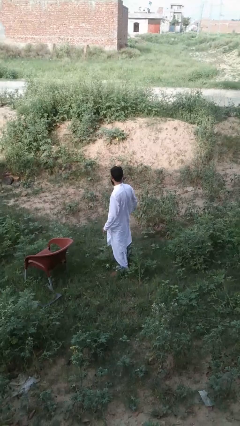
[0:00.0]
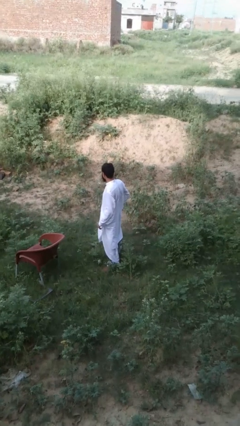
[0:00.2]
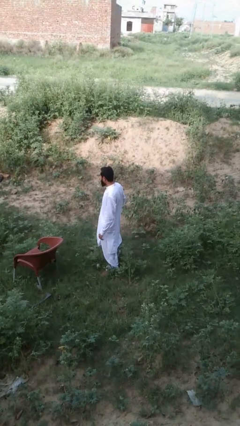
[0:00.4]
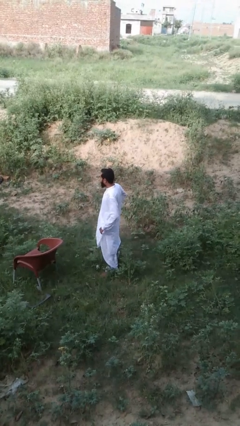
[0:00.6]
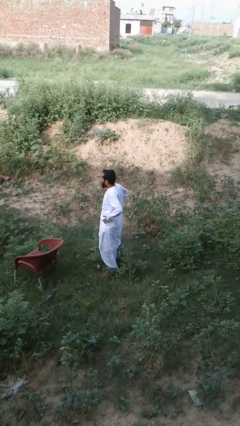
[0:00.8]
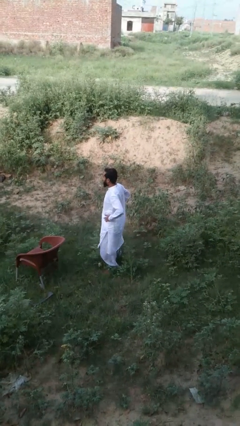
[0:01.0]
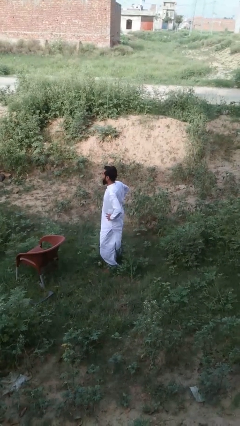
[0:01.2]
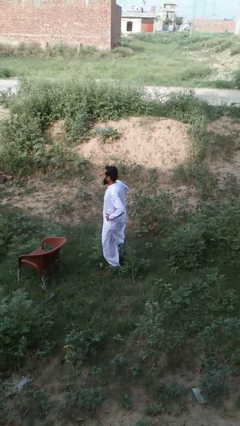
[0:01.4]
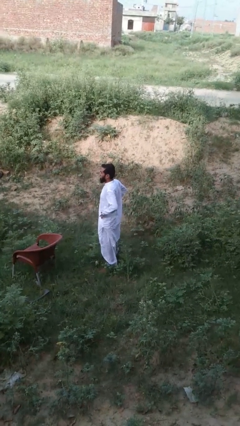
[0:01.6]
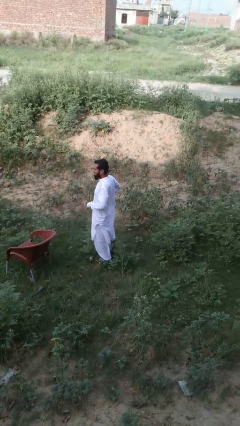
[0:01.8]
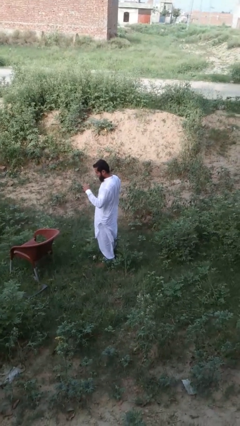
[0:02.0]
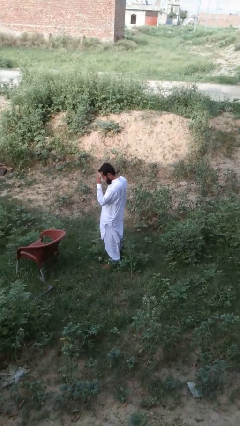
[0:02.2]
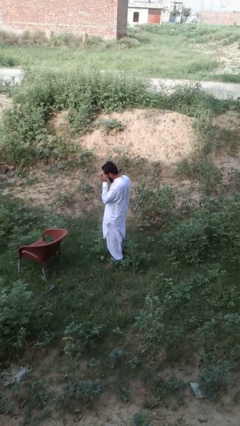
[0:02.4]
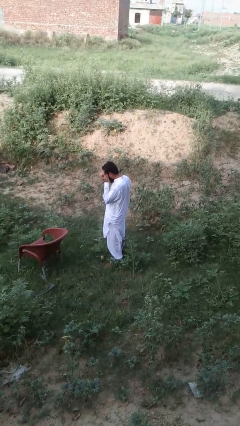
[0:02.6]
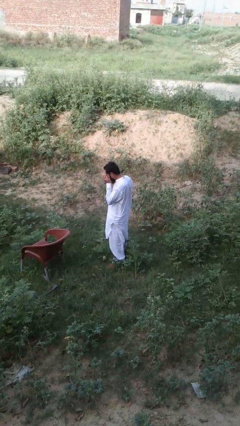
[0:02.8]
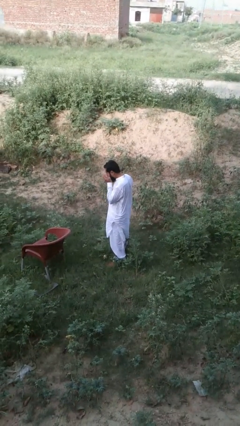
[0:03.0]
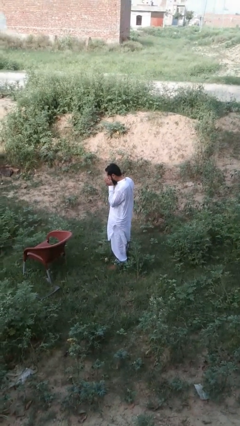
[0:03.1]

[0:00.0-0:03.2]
person wiggles hips

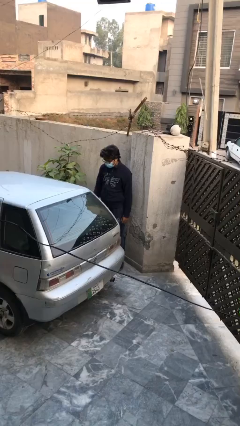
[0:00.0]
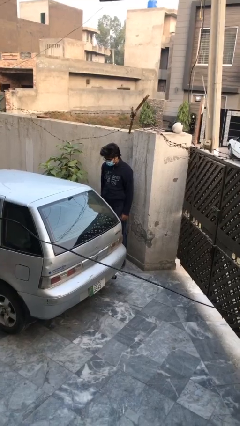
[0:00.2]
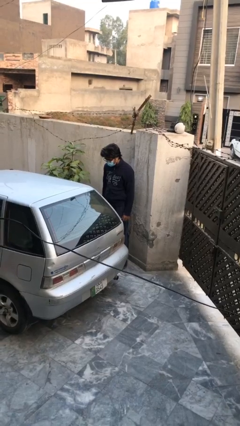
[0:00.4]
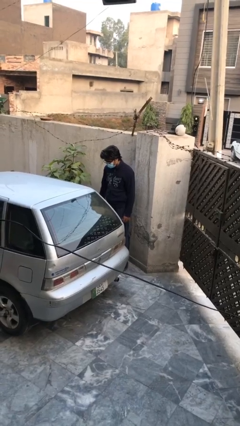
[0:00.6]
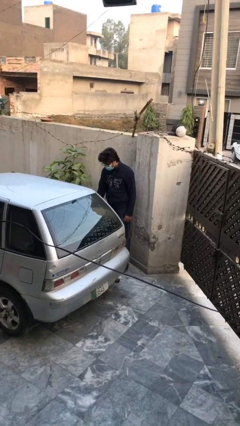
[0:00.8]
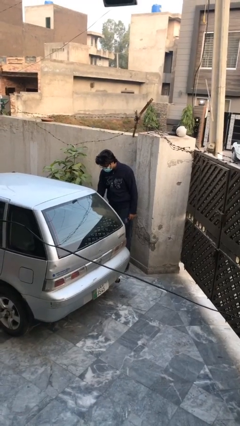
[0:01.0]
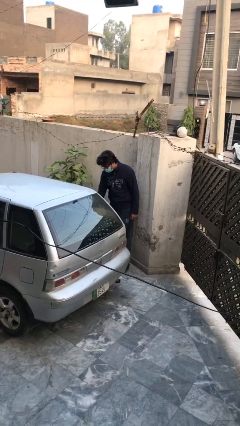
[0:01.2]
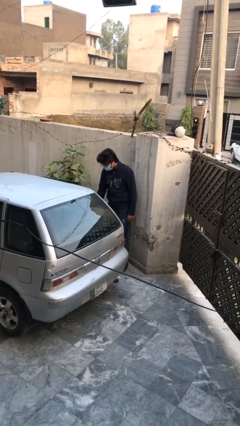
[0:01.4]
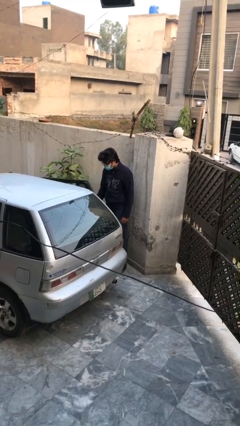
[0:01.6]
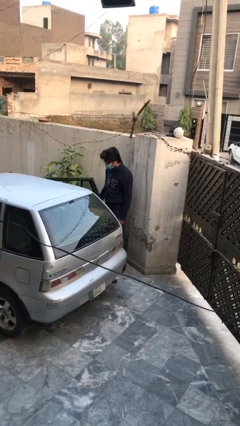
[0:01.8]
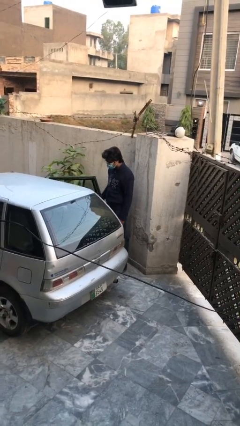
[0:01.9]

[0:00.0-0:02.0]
person opens car door

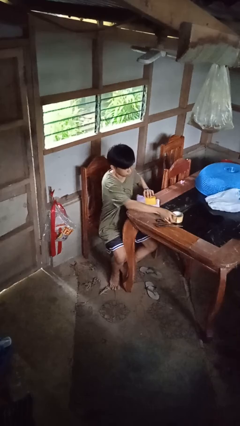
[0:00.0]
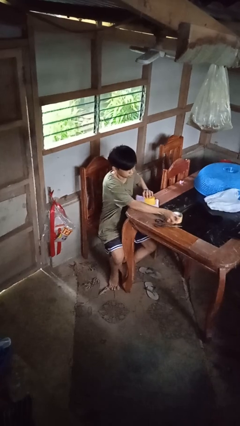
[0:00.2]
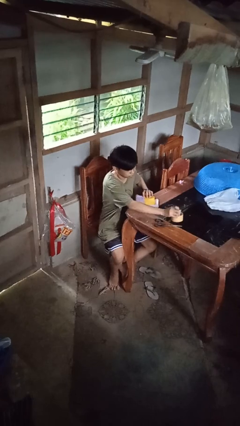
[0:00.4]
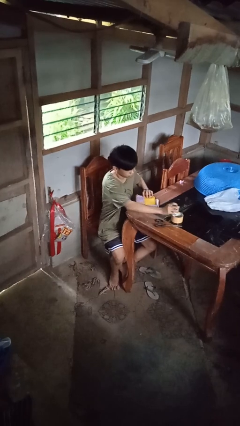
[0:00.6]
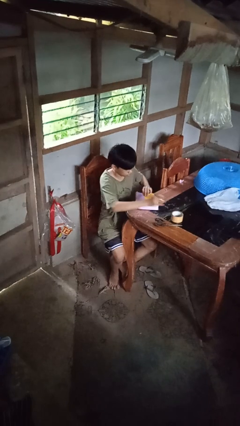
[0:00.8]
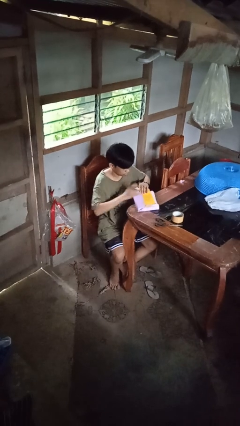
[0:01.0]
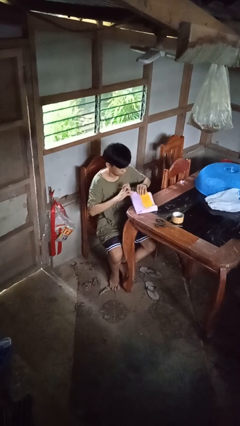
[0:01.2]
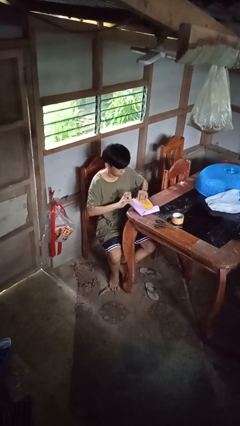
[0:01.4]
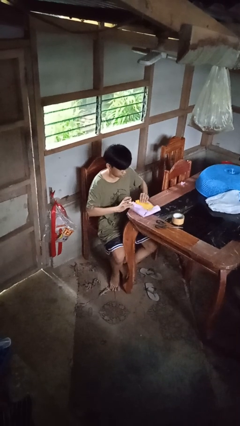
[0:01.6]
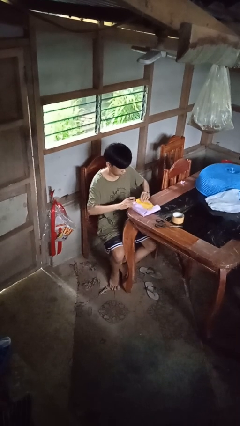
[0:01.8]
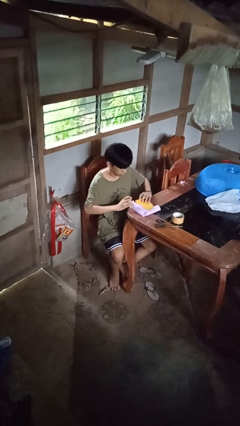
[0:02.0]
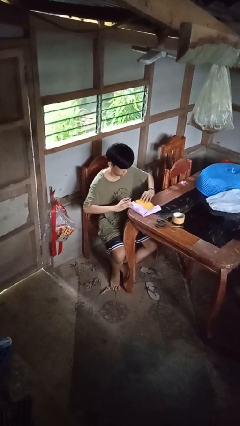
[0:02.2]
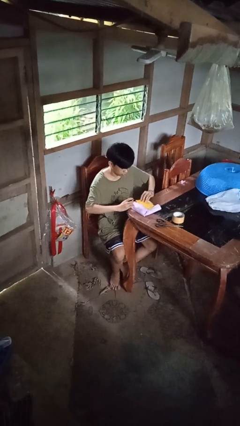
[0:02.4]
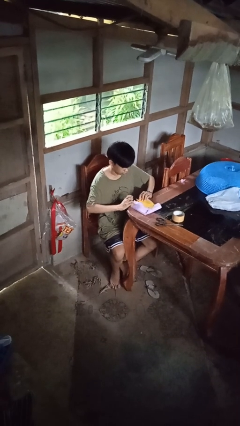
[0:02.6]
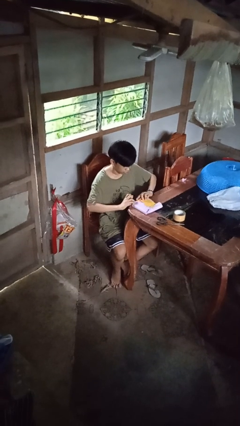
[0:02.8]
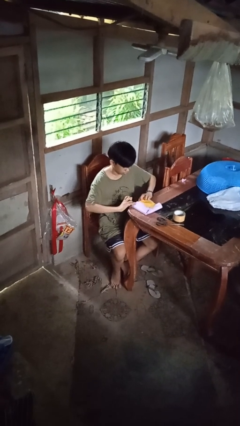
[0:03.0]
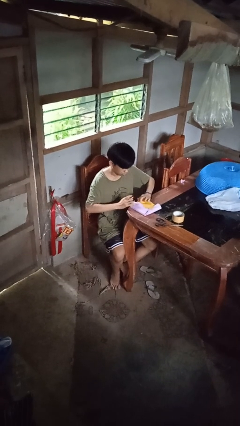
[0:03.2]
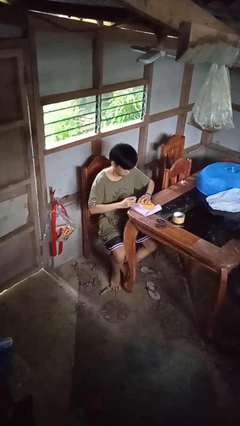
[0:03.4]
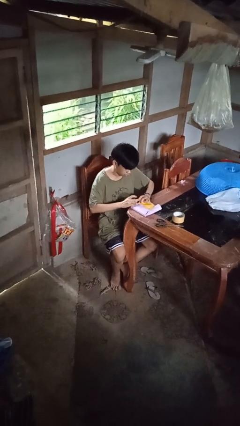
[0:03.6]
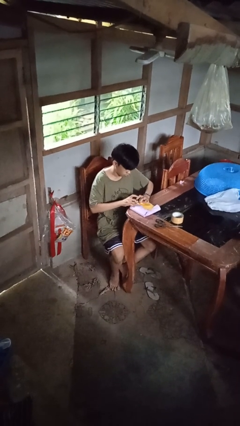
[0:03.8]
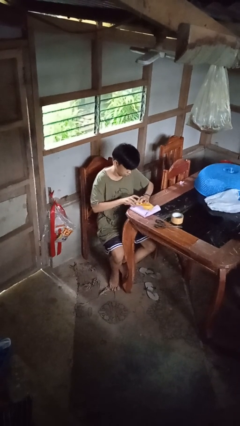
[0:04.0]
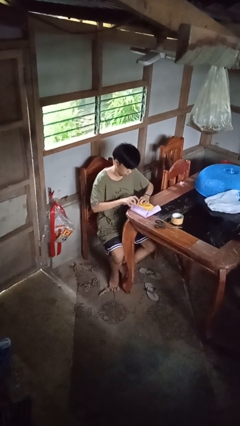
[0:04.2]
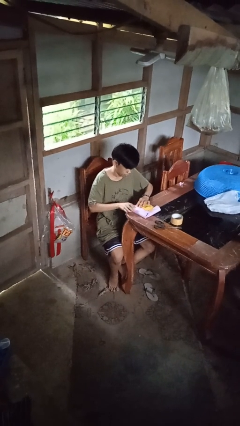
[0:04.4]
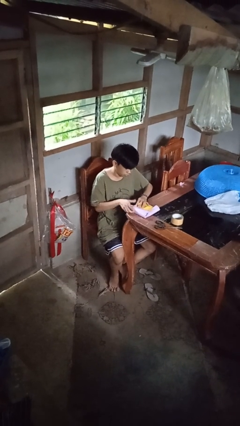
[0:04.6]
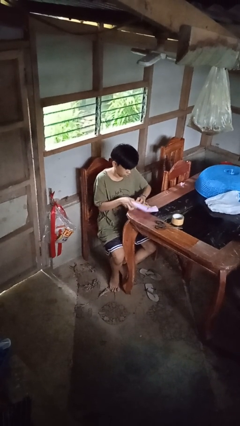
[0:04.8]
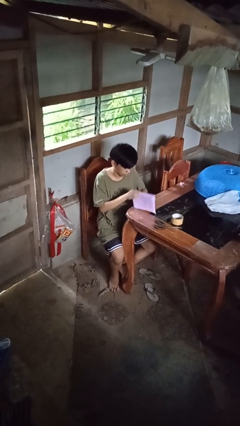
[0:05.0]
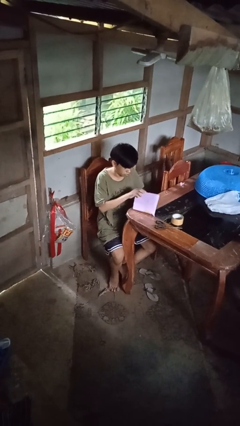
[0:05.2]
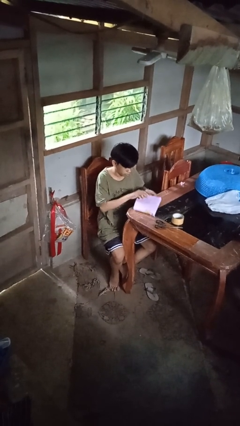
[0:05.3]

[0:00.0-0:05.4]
person wraps box

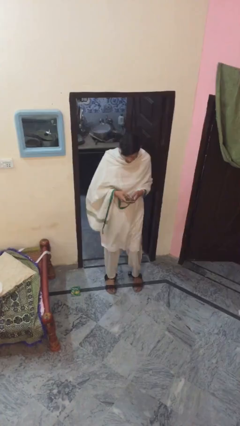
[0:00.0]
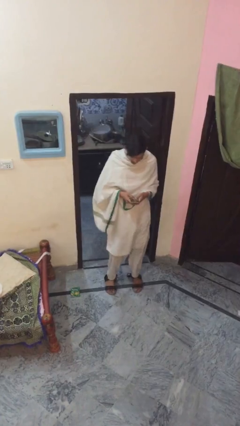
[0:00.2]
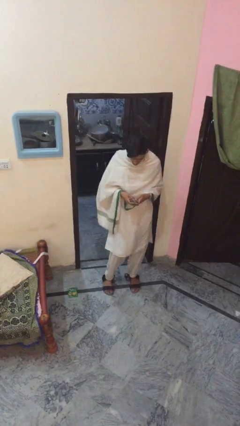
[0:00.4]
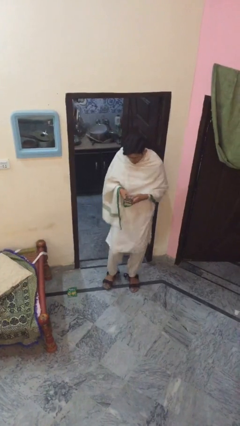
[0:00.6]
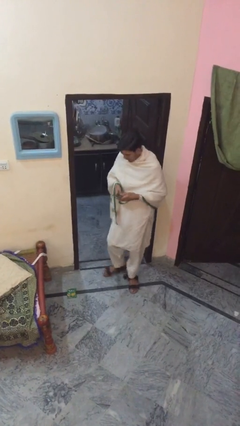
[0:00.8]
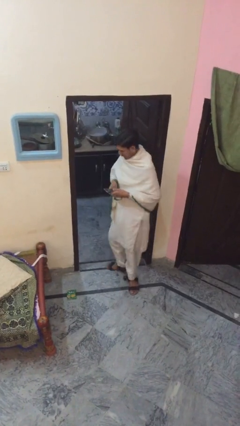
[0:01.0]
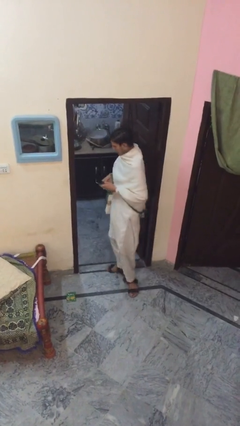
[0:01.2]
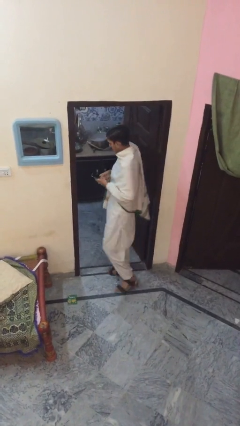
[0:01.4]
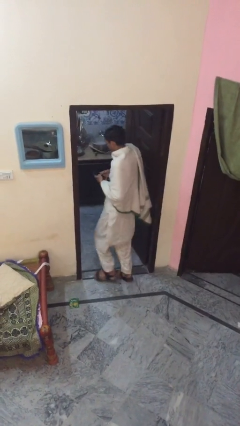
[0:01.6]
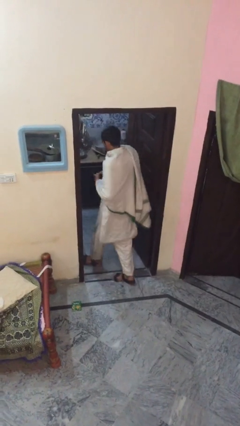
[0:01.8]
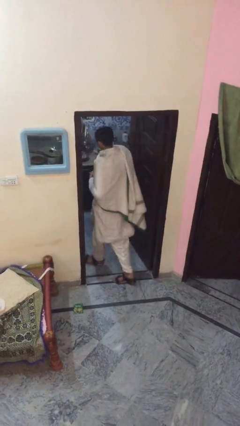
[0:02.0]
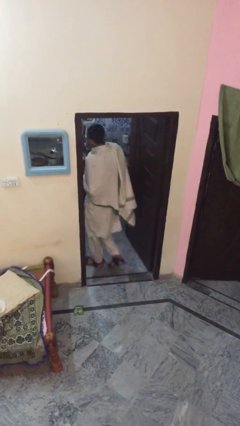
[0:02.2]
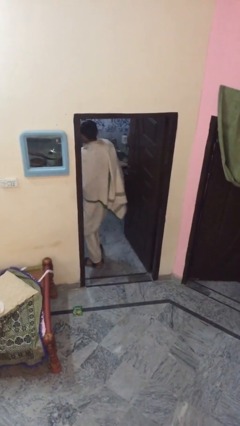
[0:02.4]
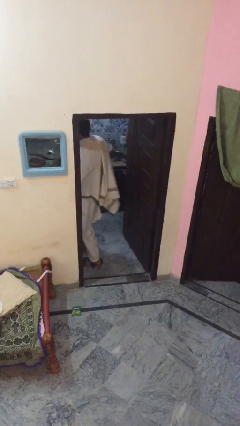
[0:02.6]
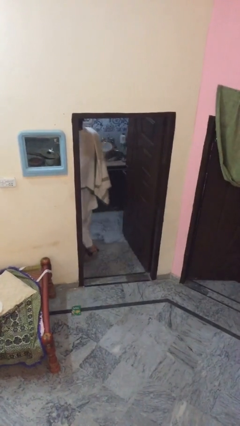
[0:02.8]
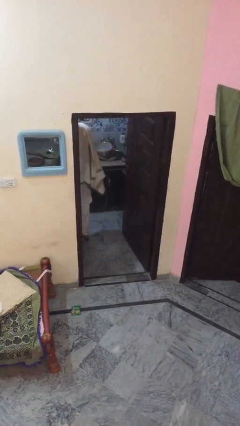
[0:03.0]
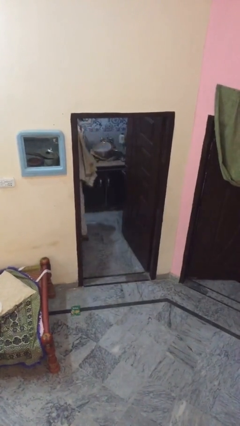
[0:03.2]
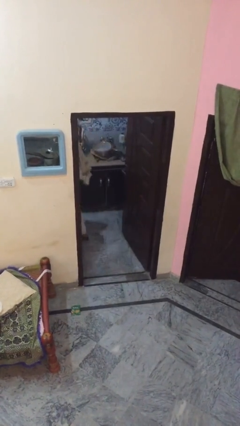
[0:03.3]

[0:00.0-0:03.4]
person exits scene through structure

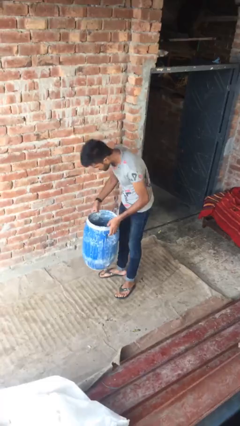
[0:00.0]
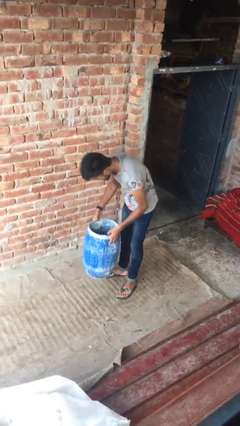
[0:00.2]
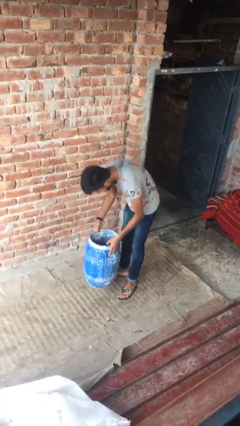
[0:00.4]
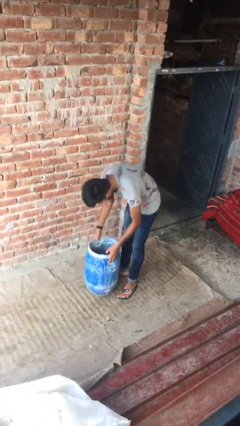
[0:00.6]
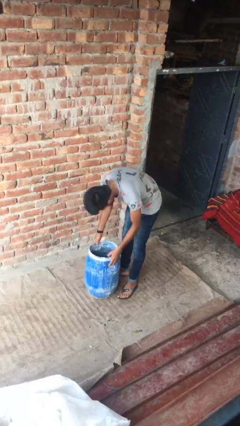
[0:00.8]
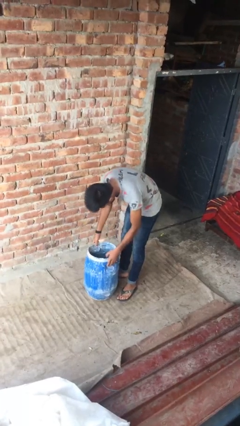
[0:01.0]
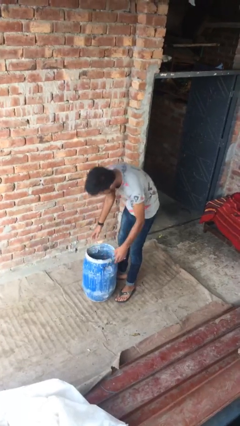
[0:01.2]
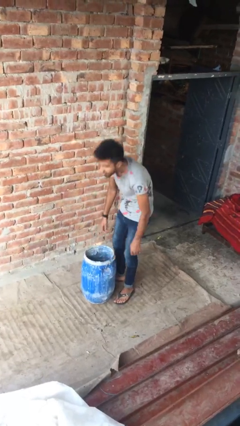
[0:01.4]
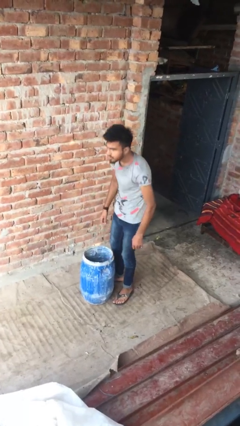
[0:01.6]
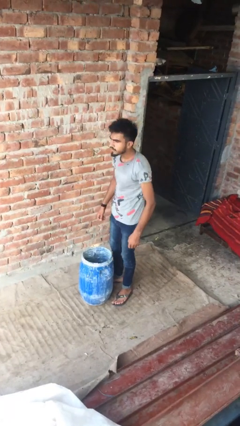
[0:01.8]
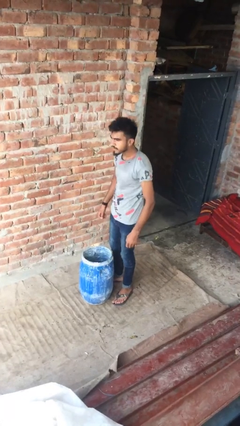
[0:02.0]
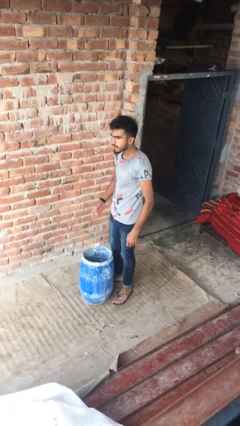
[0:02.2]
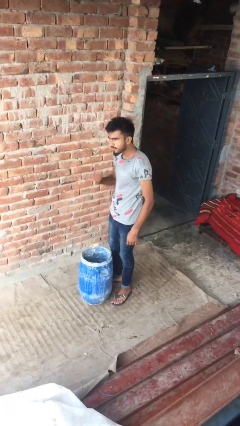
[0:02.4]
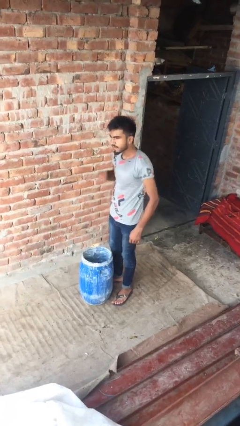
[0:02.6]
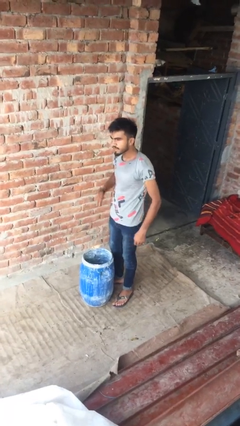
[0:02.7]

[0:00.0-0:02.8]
person puts down object on floor

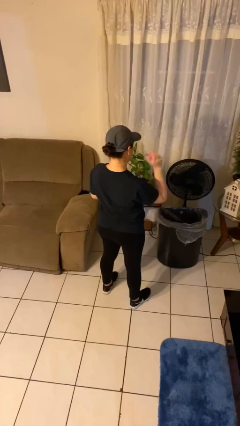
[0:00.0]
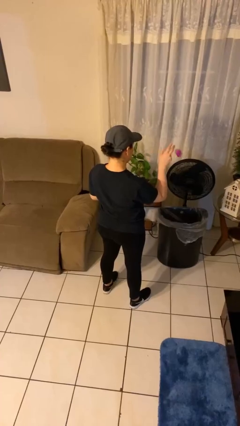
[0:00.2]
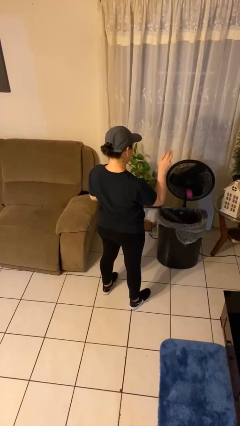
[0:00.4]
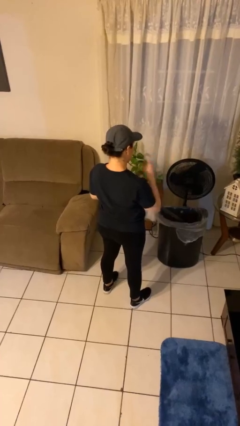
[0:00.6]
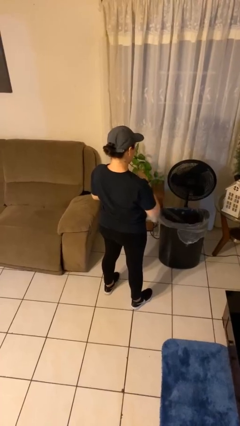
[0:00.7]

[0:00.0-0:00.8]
person discards trash
